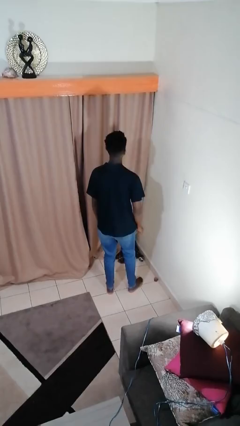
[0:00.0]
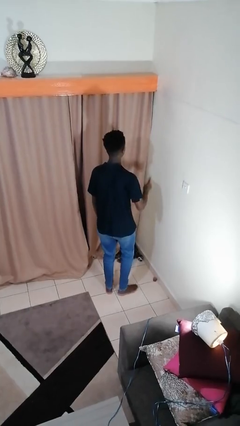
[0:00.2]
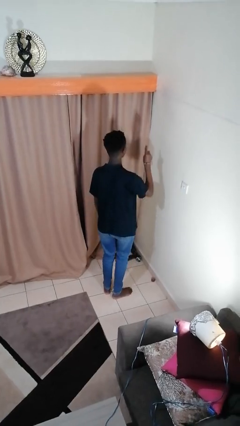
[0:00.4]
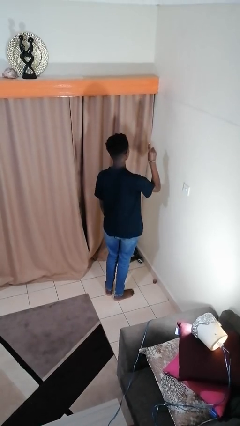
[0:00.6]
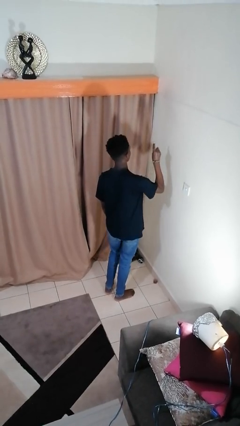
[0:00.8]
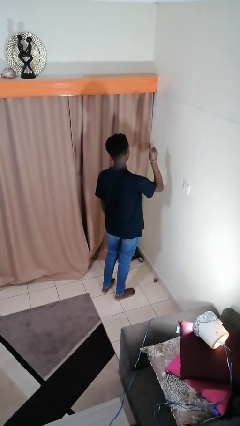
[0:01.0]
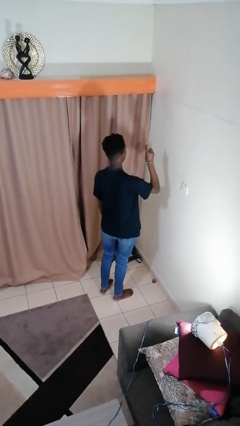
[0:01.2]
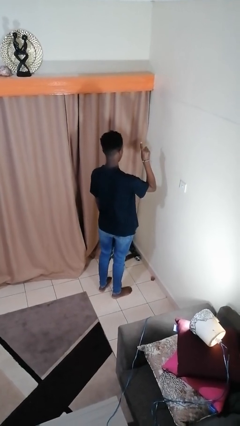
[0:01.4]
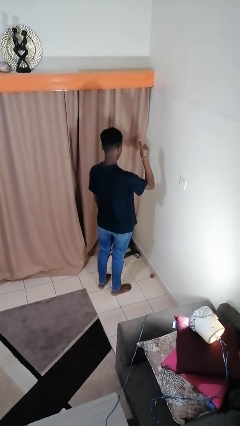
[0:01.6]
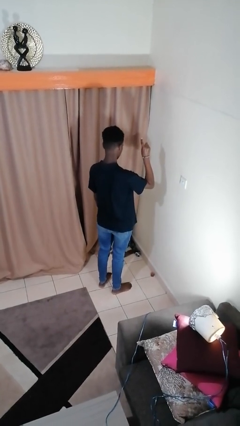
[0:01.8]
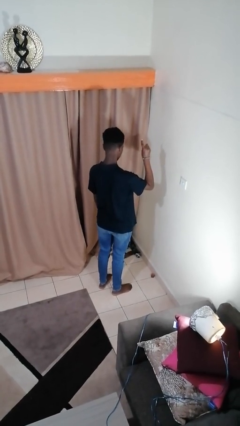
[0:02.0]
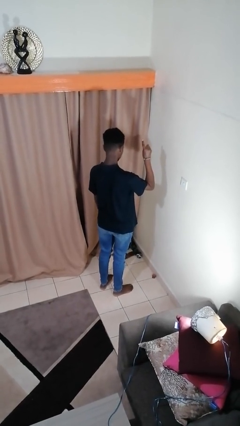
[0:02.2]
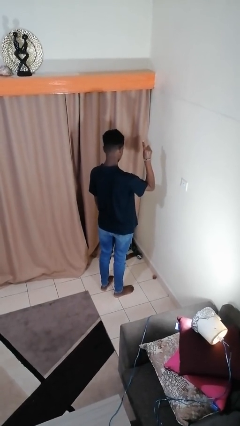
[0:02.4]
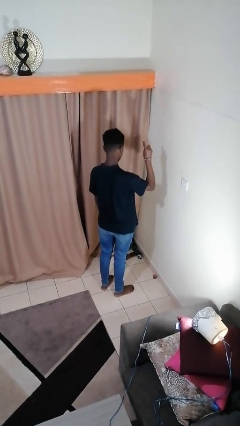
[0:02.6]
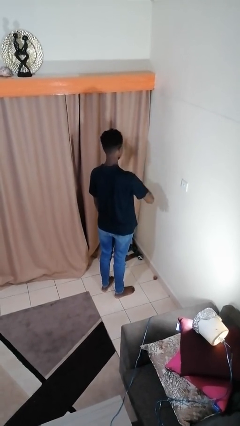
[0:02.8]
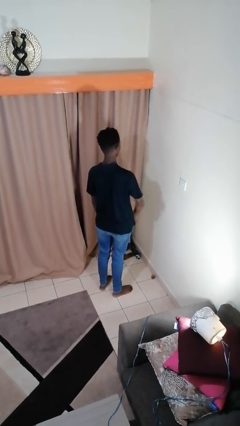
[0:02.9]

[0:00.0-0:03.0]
person gestures number one

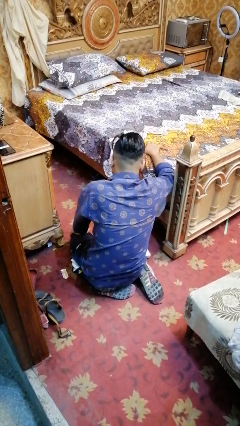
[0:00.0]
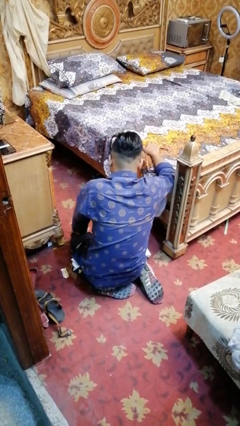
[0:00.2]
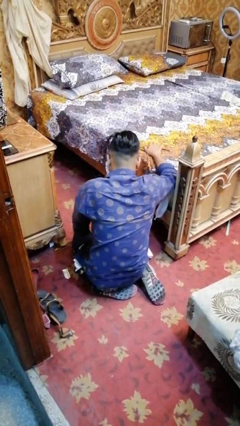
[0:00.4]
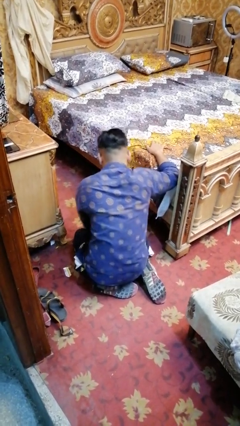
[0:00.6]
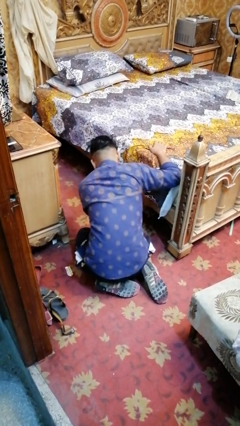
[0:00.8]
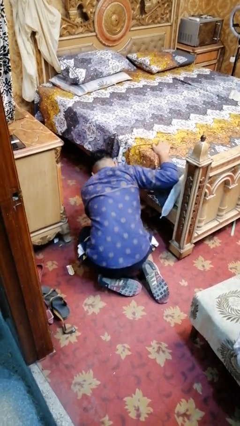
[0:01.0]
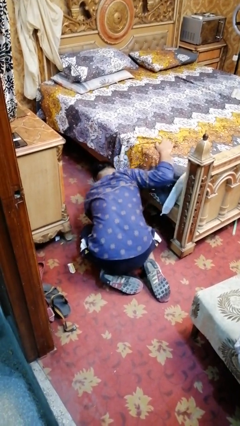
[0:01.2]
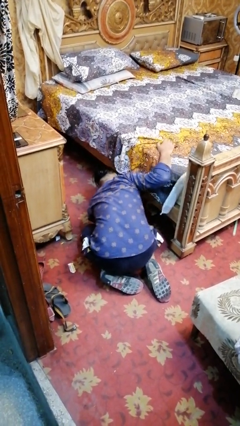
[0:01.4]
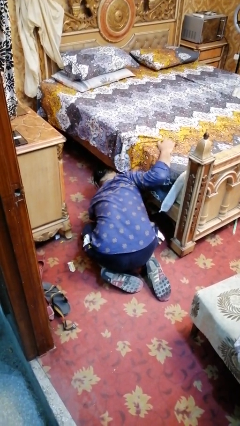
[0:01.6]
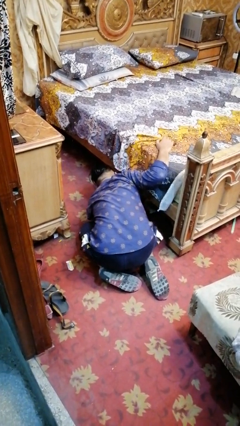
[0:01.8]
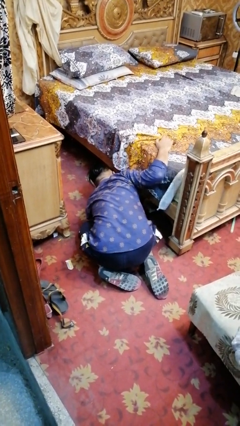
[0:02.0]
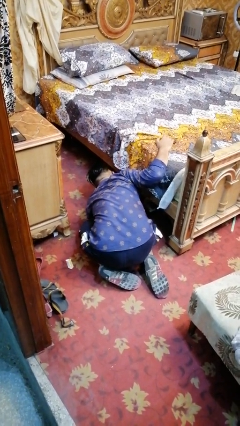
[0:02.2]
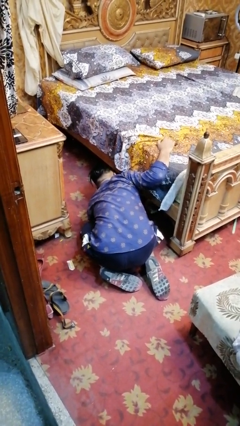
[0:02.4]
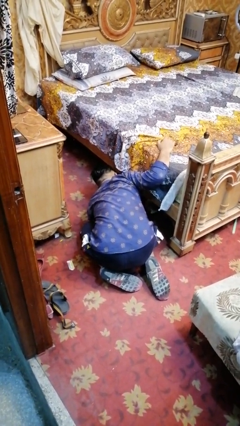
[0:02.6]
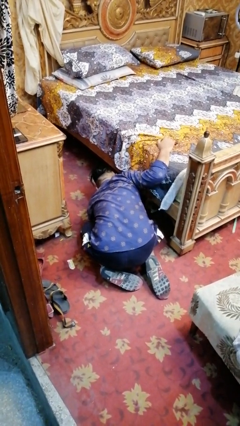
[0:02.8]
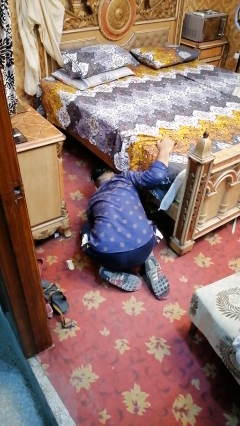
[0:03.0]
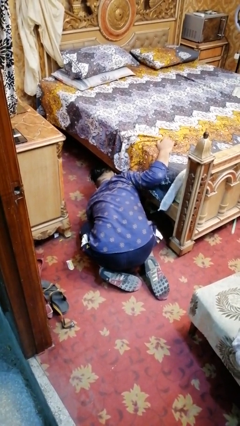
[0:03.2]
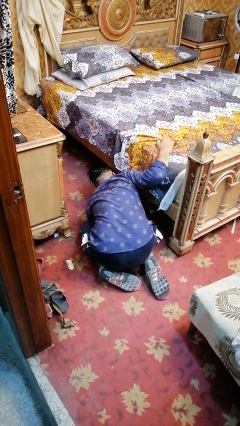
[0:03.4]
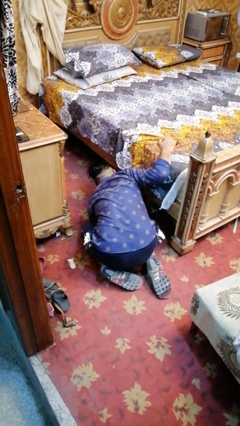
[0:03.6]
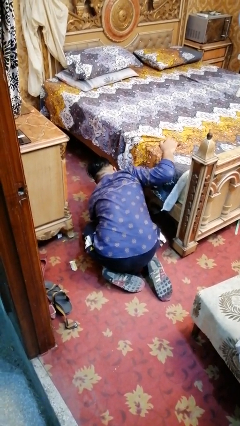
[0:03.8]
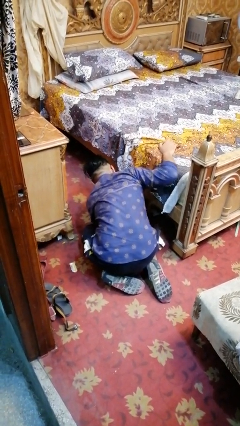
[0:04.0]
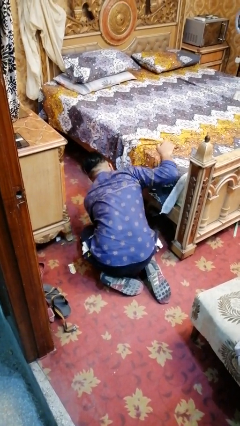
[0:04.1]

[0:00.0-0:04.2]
person searches under bed

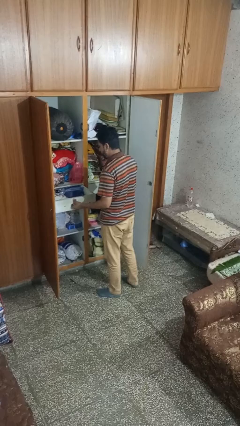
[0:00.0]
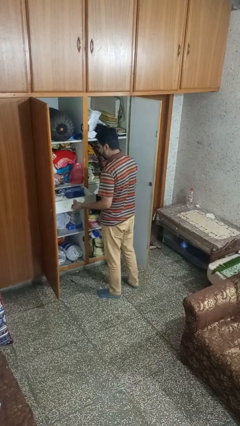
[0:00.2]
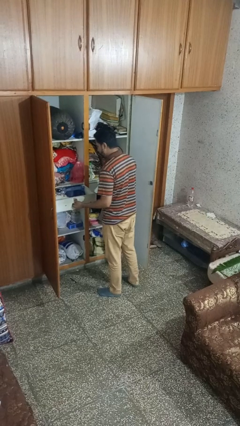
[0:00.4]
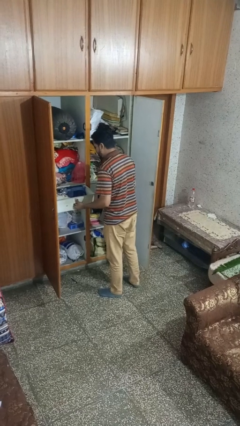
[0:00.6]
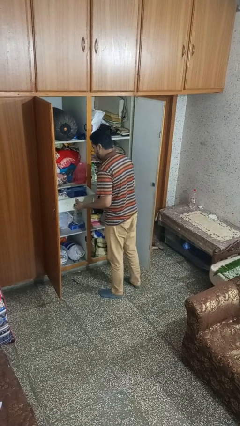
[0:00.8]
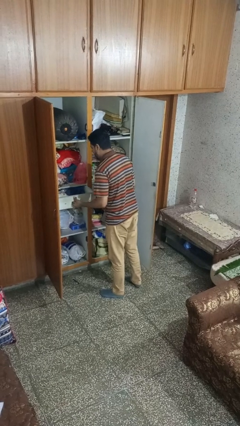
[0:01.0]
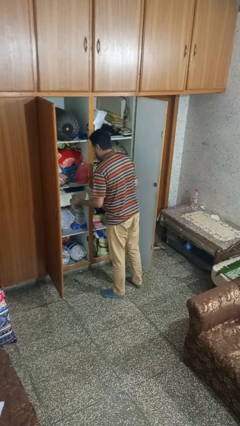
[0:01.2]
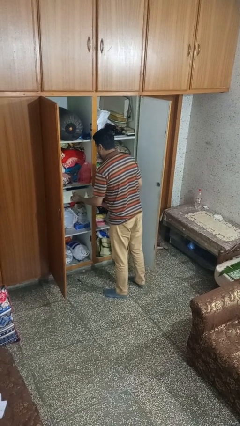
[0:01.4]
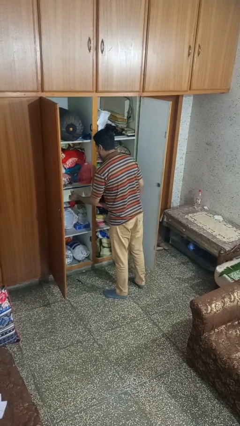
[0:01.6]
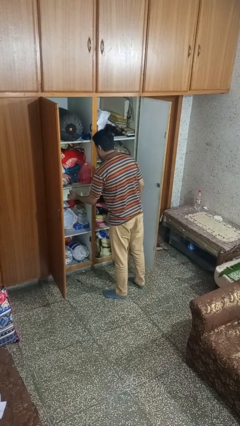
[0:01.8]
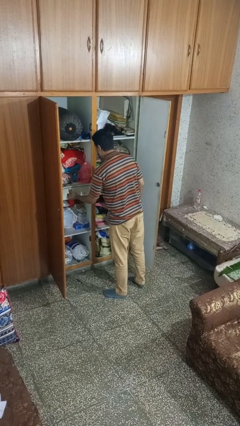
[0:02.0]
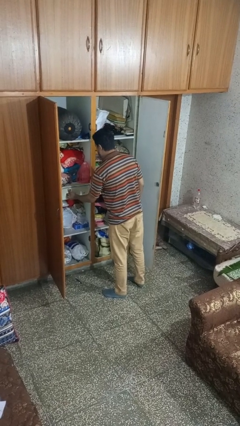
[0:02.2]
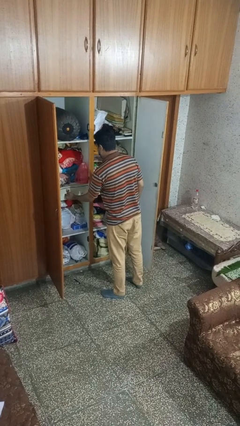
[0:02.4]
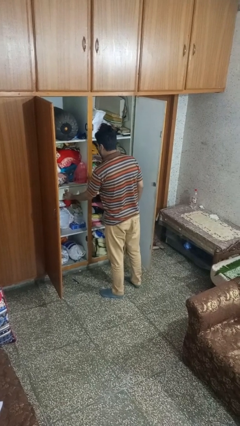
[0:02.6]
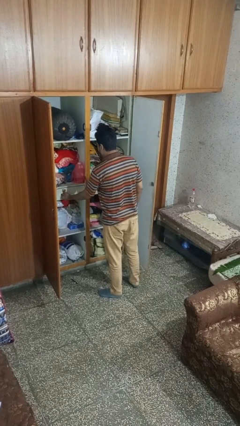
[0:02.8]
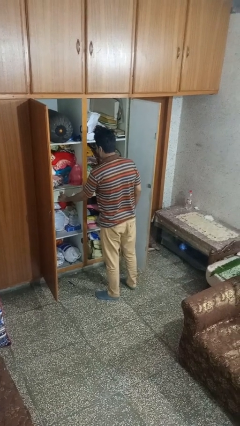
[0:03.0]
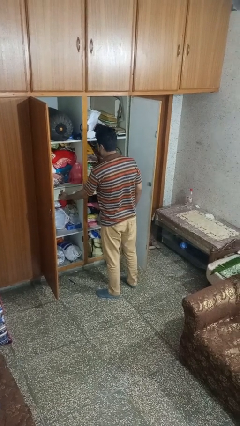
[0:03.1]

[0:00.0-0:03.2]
person closes dresser drawer

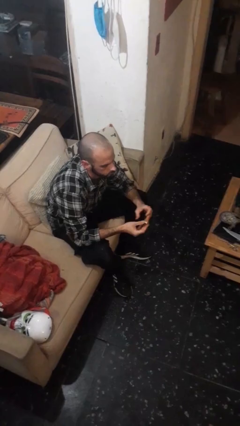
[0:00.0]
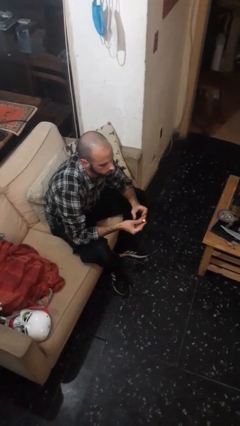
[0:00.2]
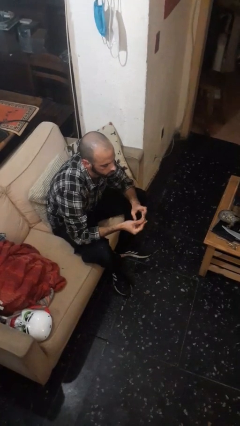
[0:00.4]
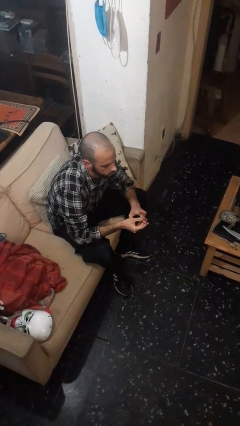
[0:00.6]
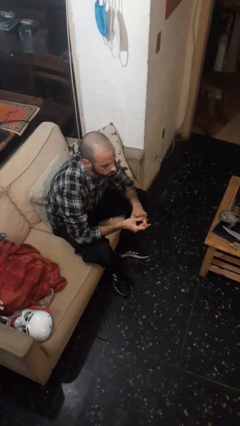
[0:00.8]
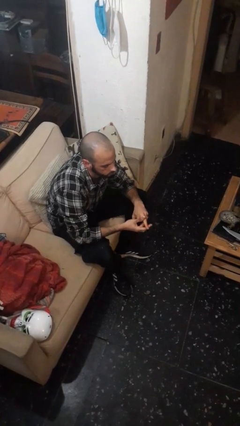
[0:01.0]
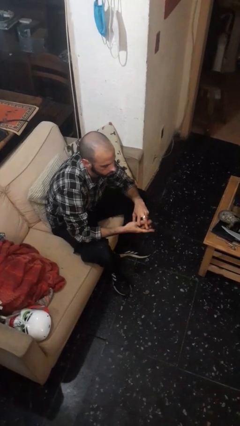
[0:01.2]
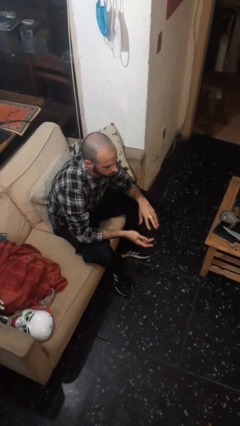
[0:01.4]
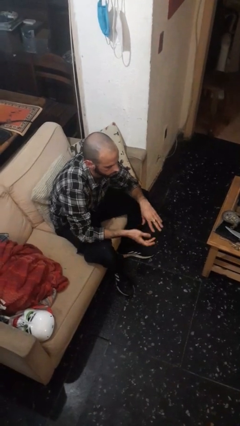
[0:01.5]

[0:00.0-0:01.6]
person puts on ring

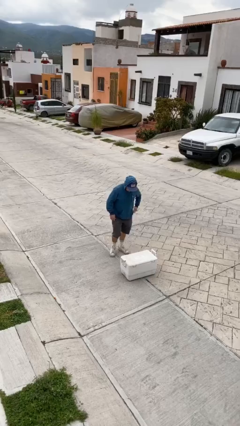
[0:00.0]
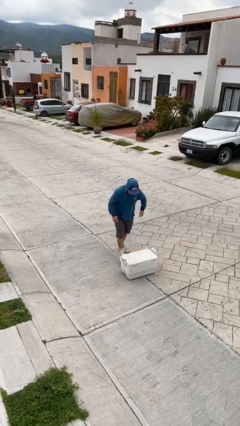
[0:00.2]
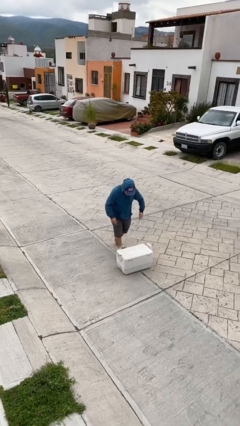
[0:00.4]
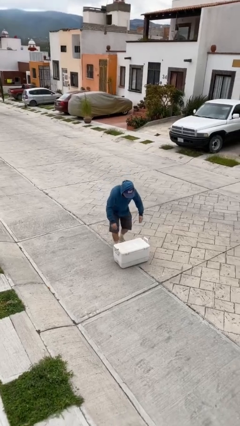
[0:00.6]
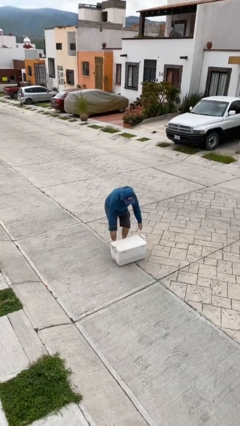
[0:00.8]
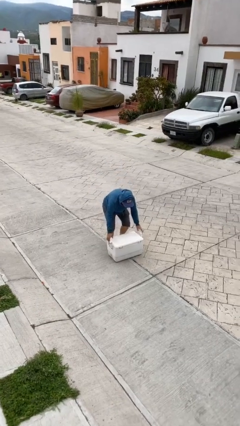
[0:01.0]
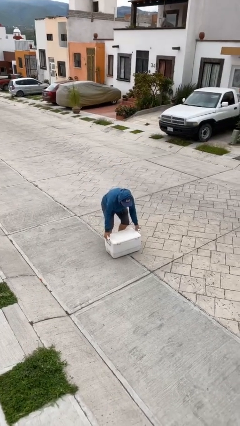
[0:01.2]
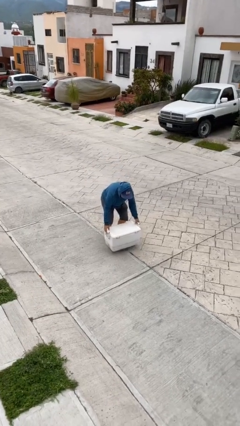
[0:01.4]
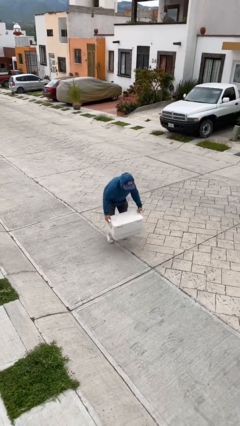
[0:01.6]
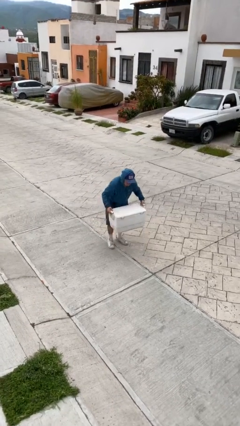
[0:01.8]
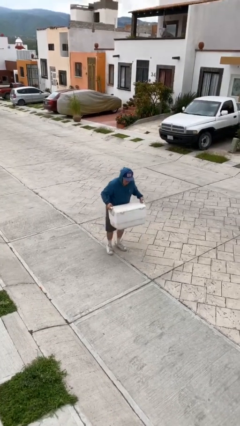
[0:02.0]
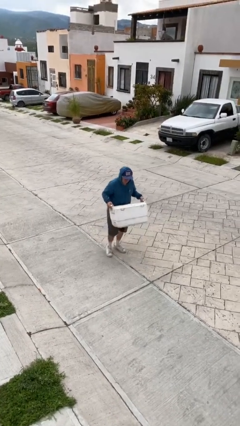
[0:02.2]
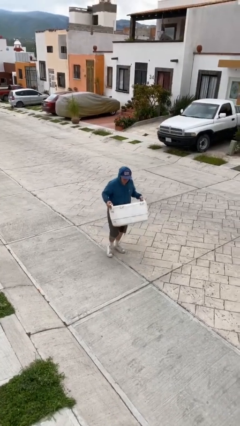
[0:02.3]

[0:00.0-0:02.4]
person picks up object from floor

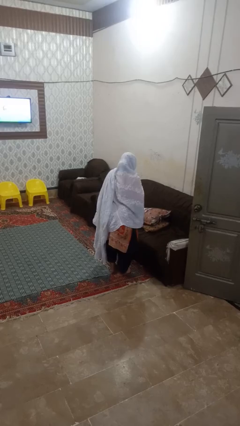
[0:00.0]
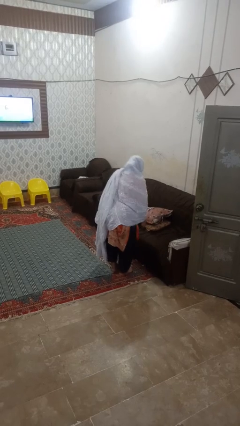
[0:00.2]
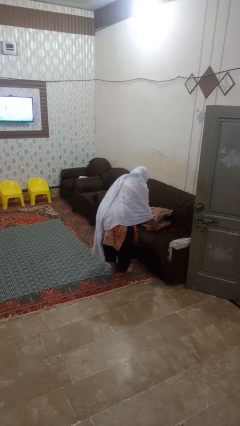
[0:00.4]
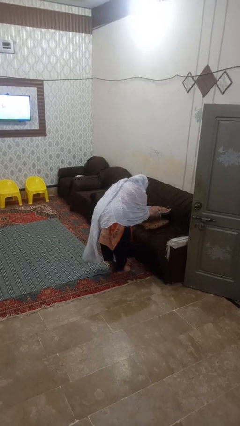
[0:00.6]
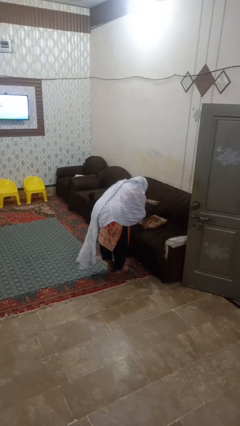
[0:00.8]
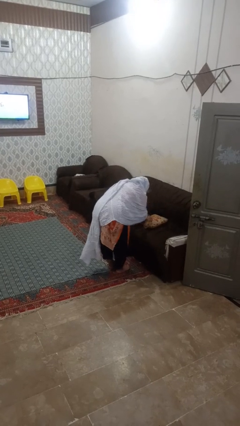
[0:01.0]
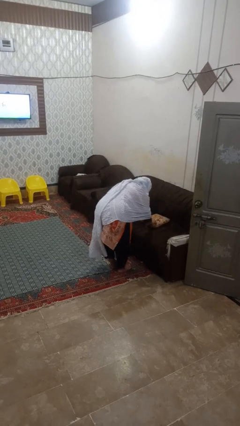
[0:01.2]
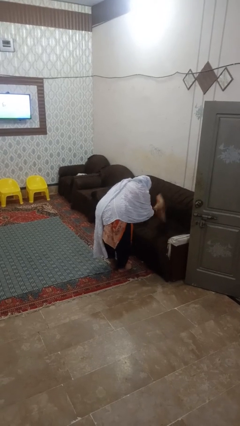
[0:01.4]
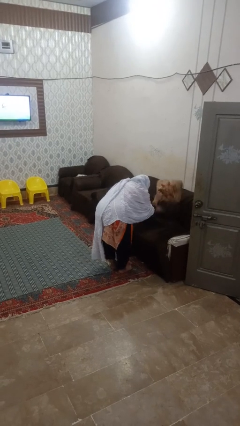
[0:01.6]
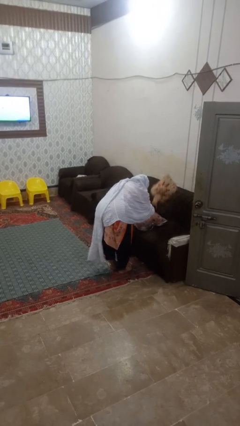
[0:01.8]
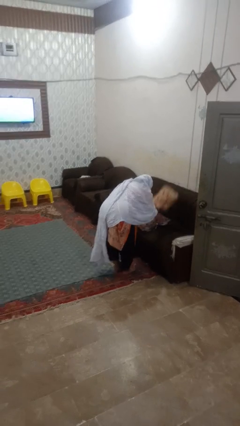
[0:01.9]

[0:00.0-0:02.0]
person searches in couch

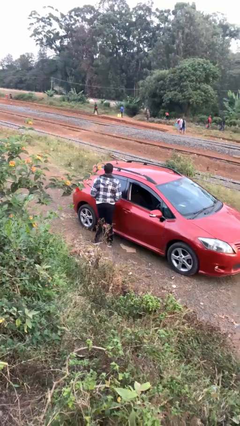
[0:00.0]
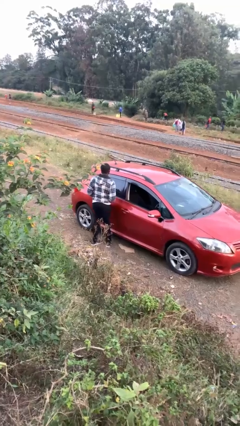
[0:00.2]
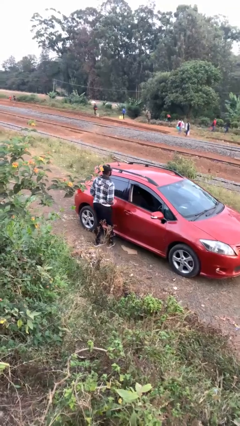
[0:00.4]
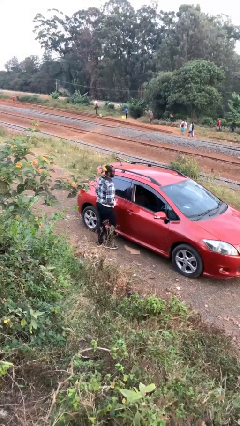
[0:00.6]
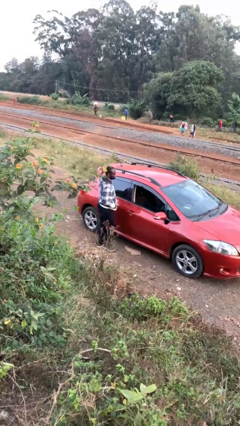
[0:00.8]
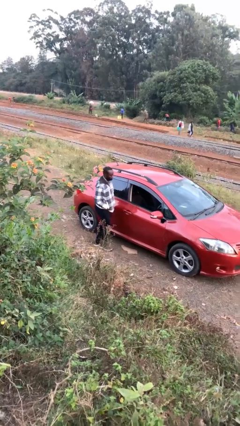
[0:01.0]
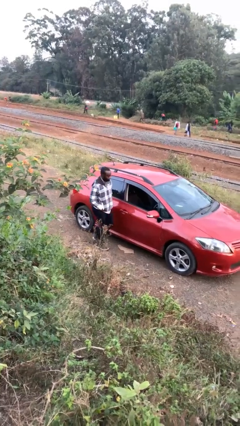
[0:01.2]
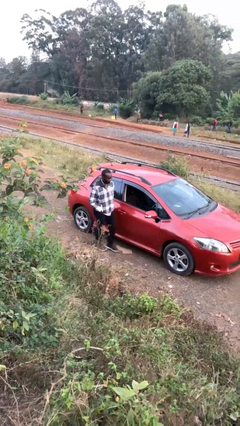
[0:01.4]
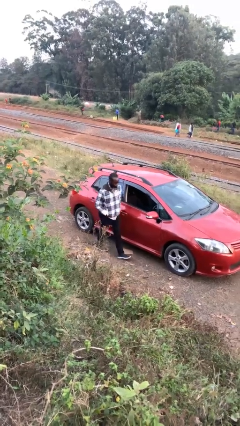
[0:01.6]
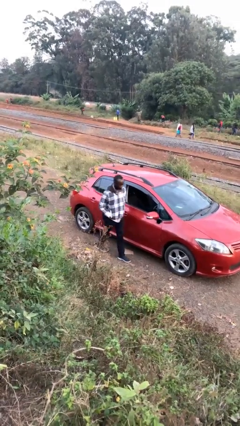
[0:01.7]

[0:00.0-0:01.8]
person kicks car tires
